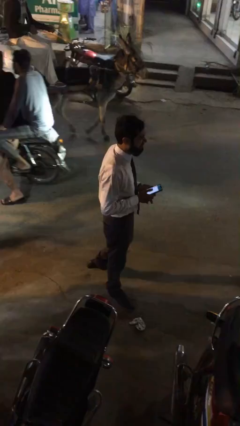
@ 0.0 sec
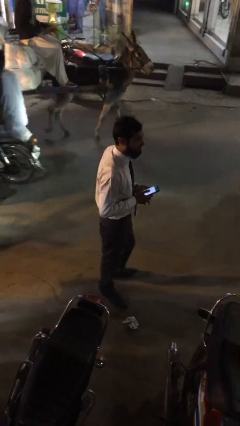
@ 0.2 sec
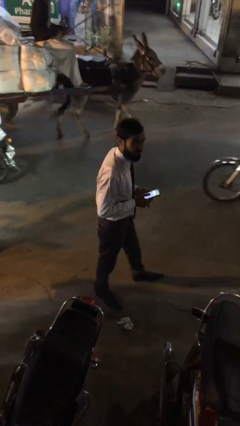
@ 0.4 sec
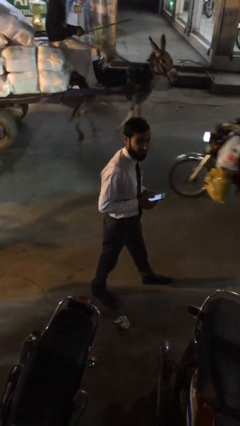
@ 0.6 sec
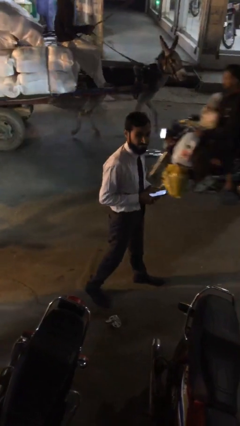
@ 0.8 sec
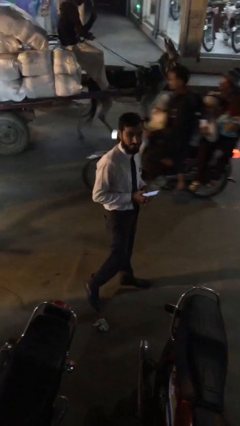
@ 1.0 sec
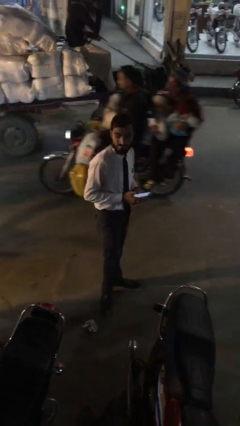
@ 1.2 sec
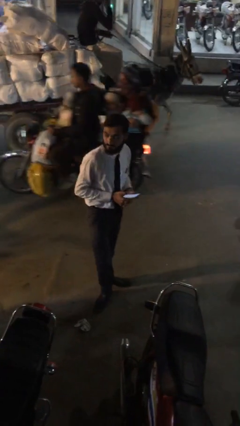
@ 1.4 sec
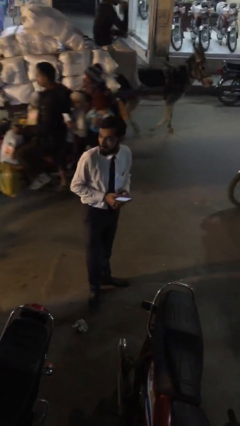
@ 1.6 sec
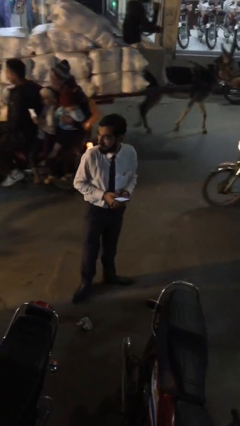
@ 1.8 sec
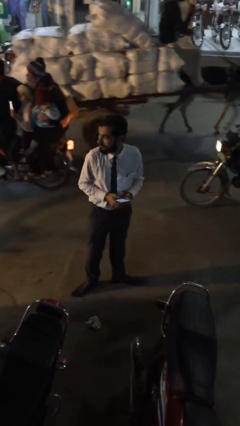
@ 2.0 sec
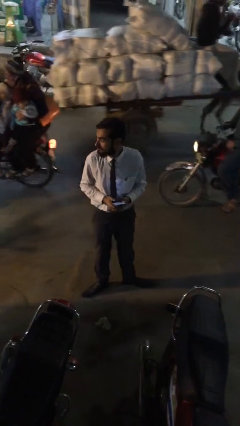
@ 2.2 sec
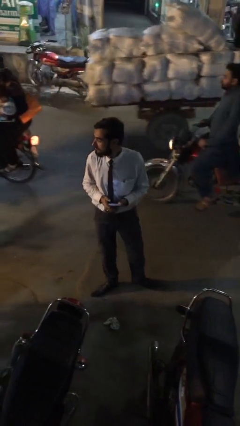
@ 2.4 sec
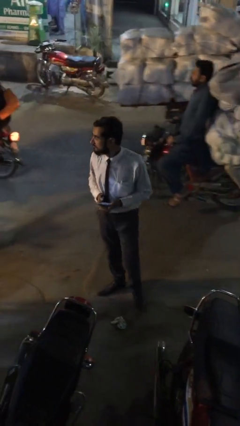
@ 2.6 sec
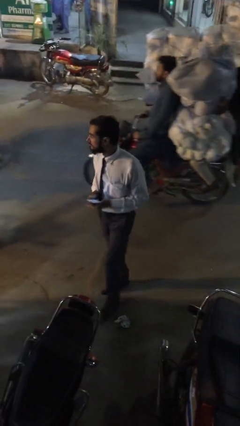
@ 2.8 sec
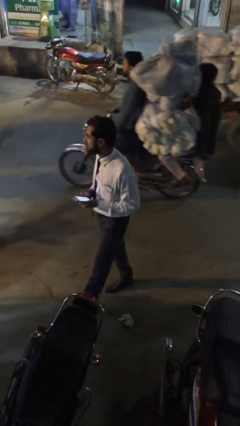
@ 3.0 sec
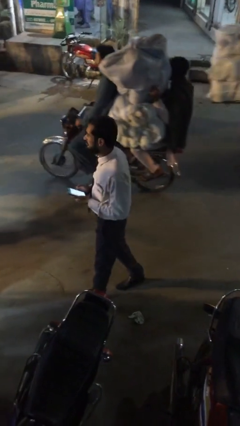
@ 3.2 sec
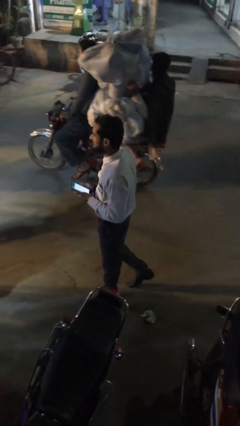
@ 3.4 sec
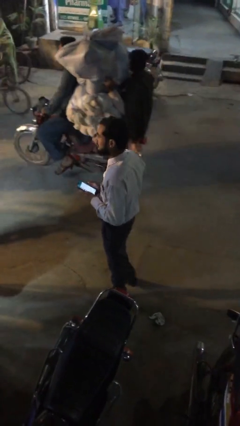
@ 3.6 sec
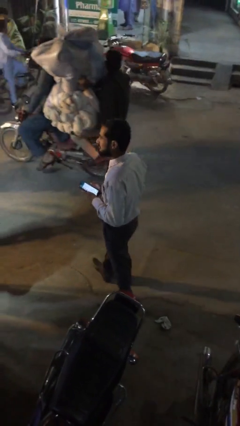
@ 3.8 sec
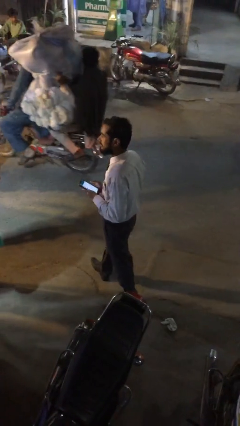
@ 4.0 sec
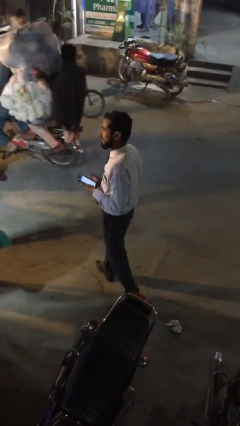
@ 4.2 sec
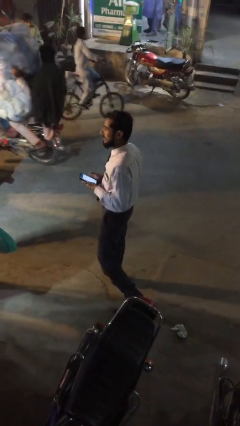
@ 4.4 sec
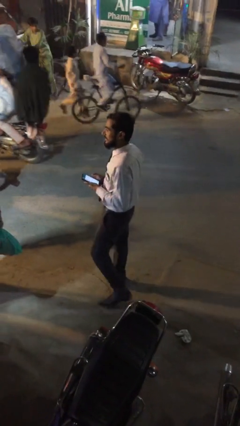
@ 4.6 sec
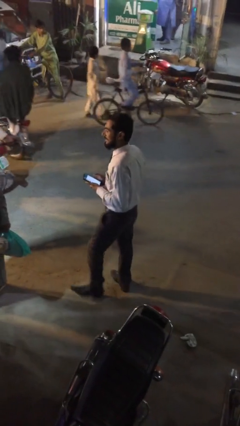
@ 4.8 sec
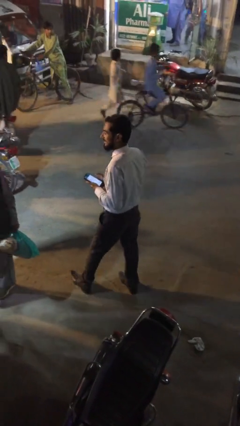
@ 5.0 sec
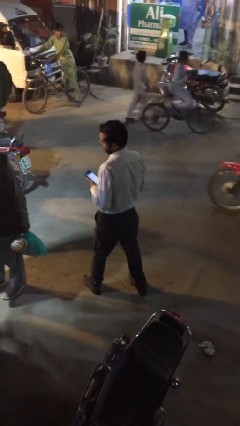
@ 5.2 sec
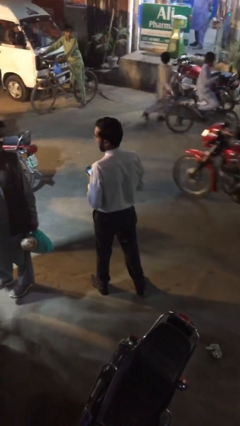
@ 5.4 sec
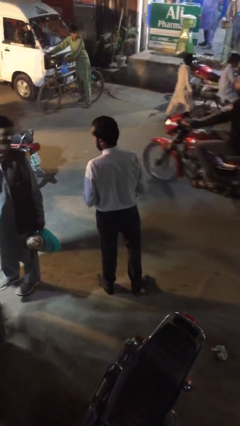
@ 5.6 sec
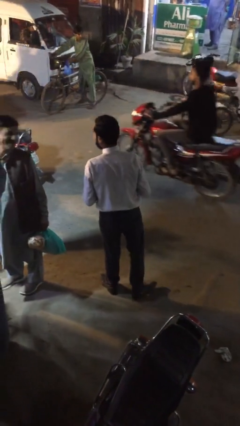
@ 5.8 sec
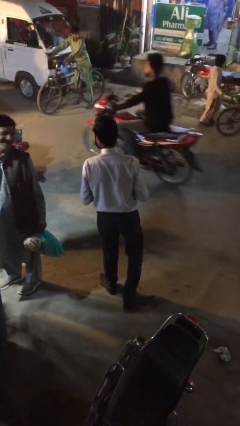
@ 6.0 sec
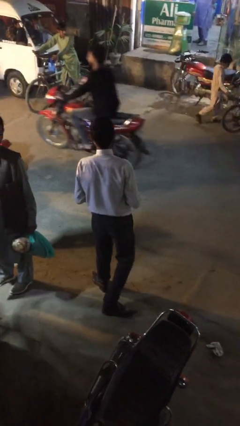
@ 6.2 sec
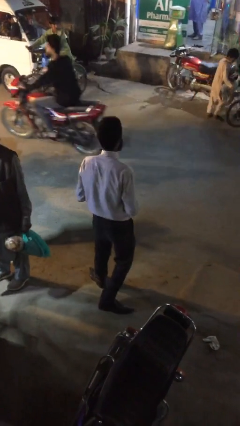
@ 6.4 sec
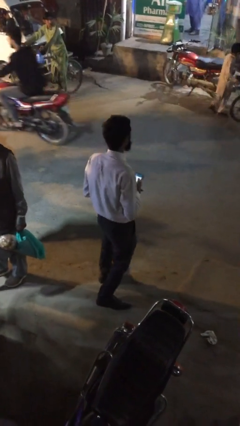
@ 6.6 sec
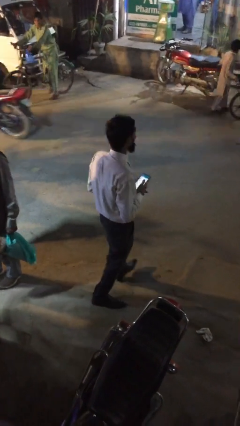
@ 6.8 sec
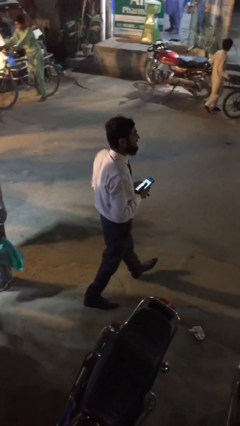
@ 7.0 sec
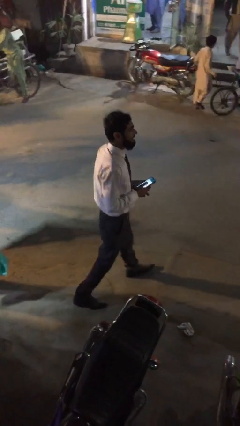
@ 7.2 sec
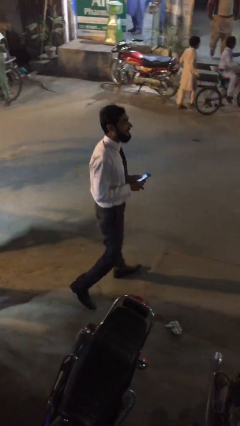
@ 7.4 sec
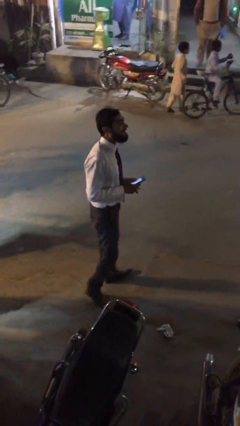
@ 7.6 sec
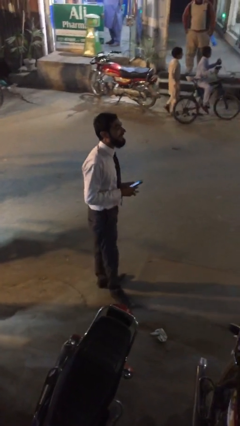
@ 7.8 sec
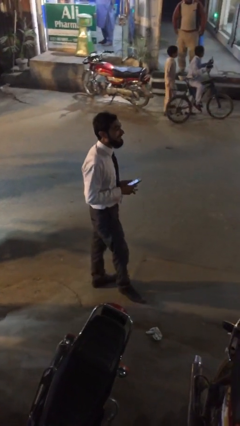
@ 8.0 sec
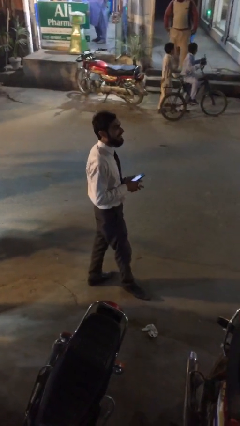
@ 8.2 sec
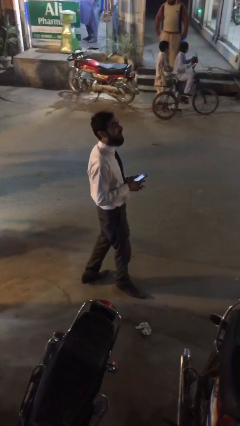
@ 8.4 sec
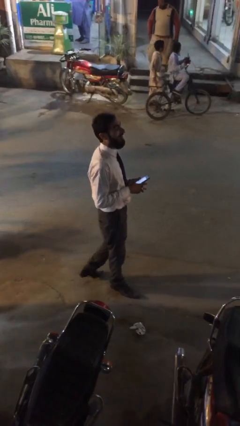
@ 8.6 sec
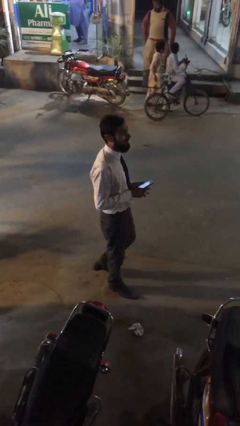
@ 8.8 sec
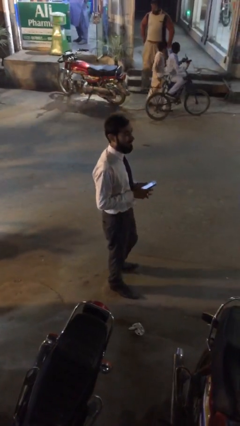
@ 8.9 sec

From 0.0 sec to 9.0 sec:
person walks

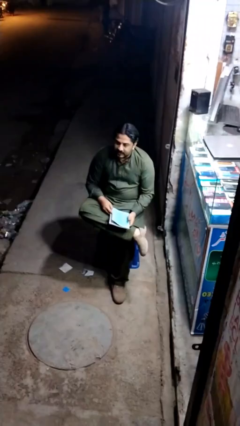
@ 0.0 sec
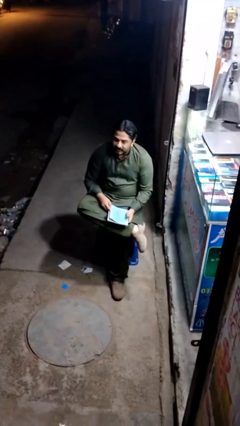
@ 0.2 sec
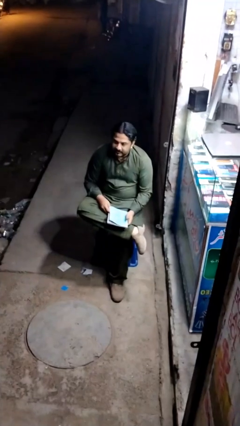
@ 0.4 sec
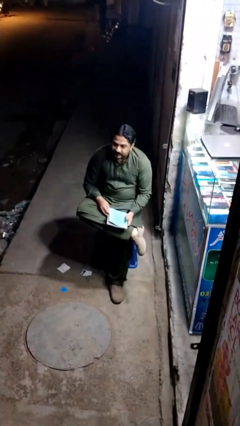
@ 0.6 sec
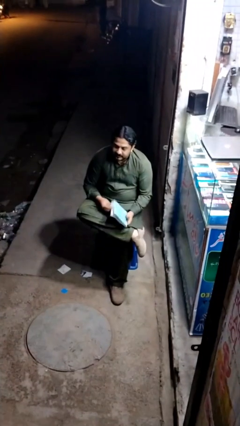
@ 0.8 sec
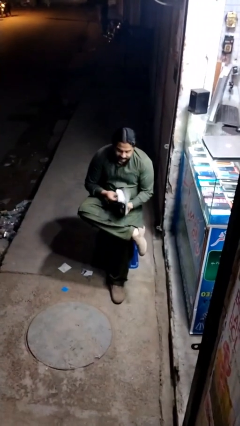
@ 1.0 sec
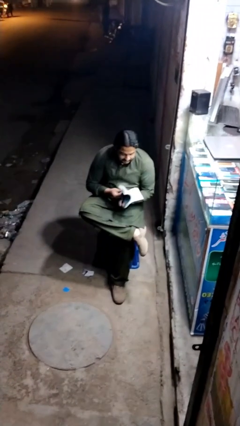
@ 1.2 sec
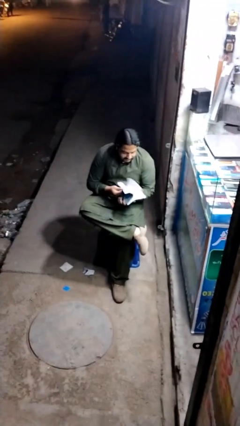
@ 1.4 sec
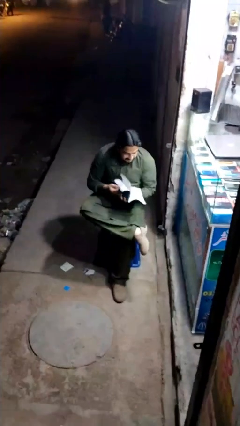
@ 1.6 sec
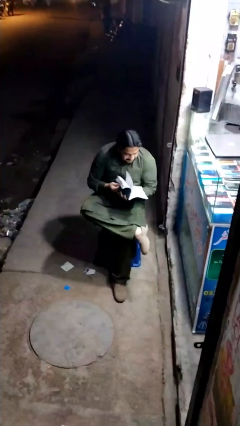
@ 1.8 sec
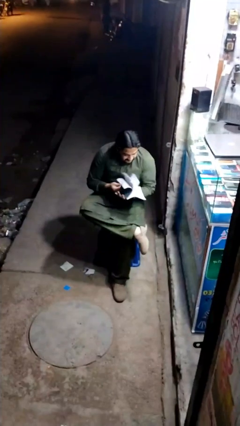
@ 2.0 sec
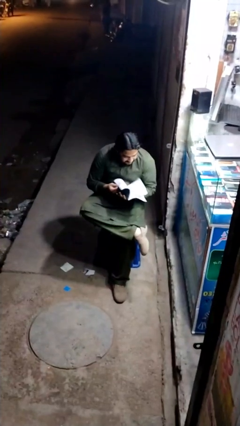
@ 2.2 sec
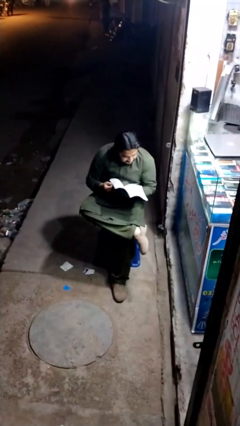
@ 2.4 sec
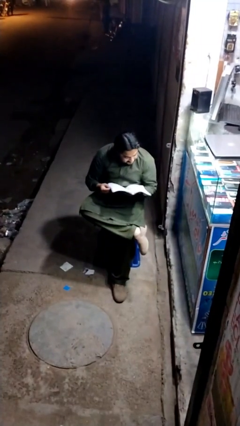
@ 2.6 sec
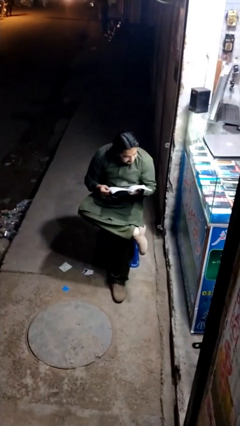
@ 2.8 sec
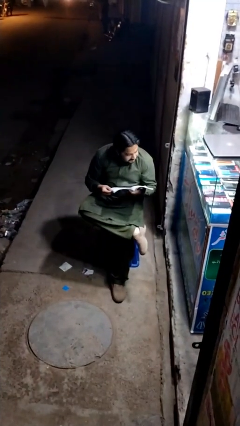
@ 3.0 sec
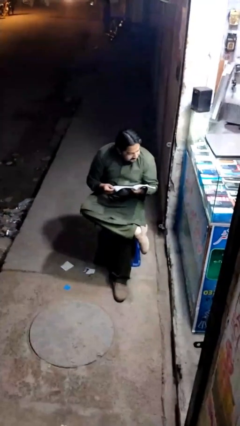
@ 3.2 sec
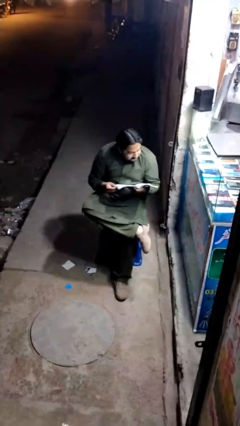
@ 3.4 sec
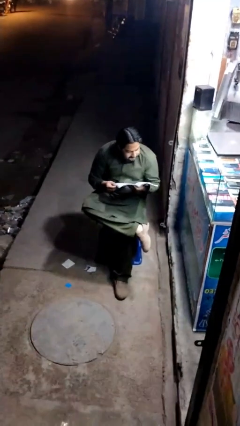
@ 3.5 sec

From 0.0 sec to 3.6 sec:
person reads document

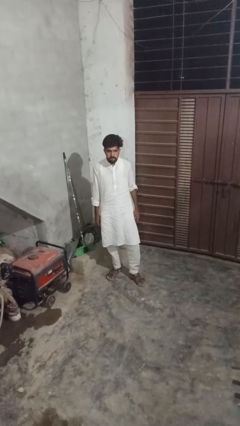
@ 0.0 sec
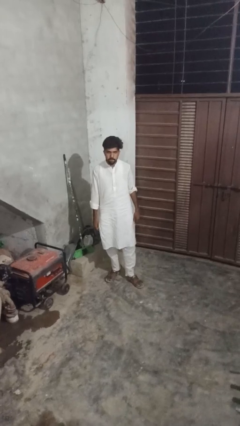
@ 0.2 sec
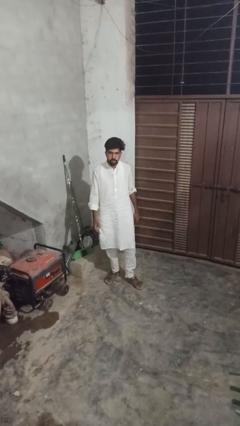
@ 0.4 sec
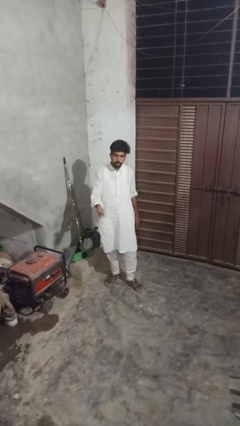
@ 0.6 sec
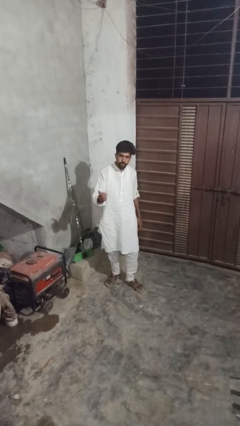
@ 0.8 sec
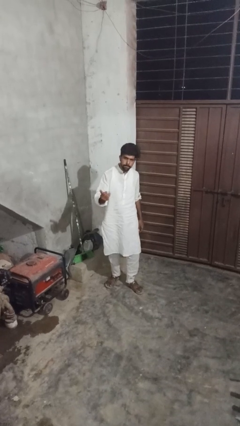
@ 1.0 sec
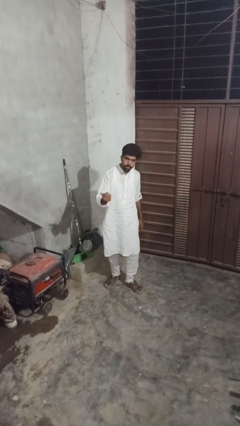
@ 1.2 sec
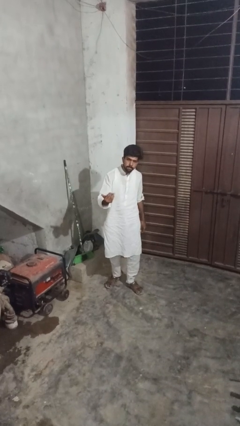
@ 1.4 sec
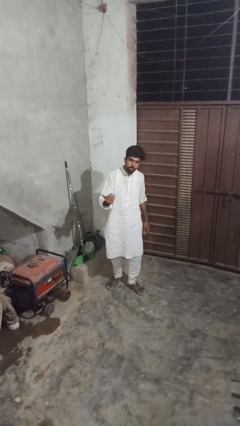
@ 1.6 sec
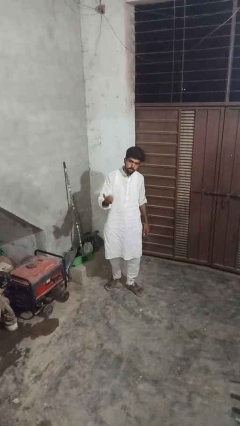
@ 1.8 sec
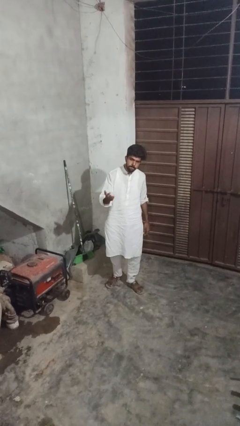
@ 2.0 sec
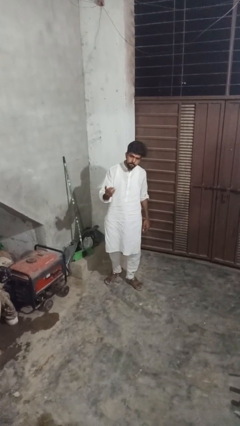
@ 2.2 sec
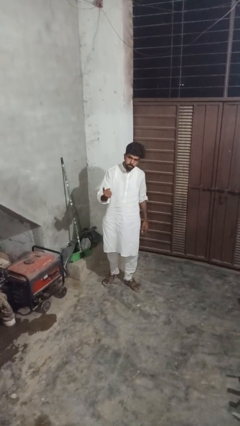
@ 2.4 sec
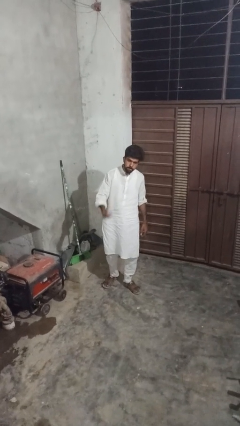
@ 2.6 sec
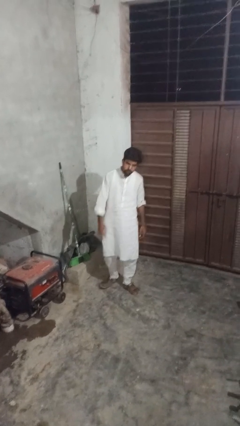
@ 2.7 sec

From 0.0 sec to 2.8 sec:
person gestures come here

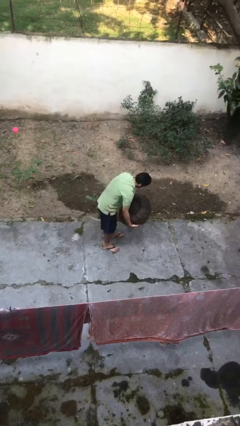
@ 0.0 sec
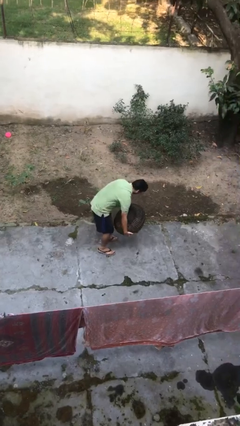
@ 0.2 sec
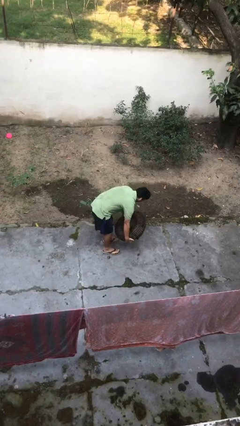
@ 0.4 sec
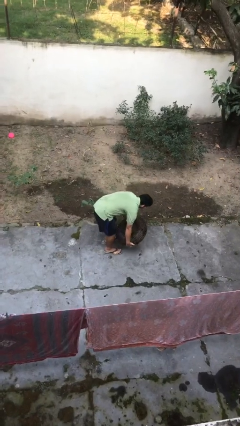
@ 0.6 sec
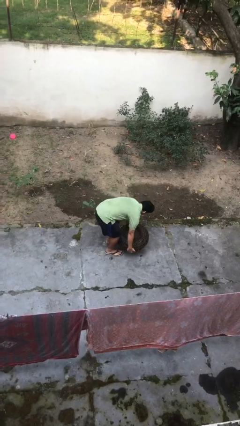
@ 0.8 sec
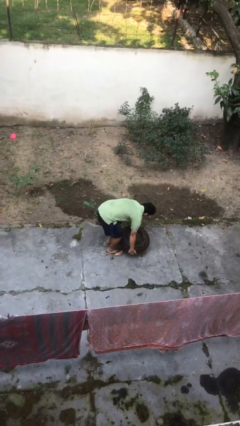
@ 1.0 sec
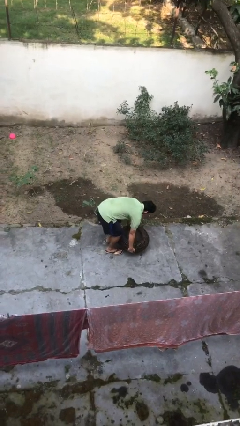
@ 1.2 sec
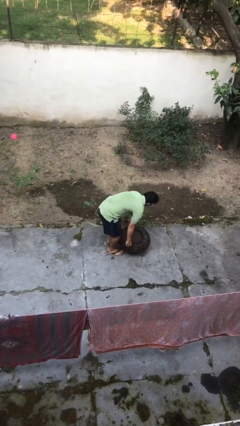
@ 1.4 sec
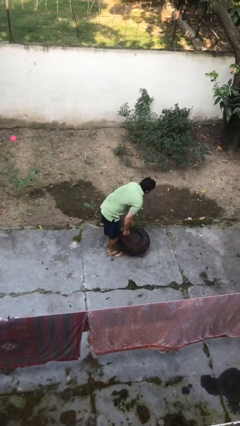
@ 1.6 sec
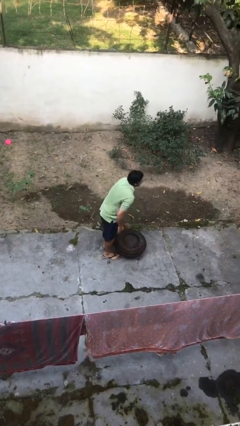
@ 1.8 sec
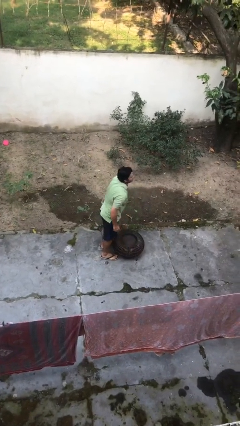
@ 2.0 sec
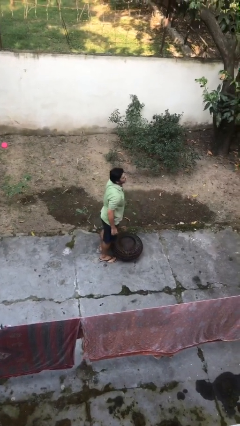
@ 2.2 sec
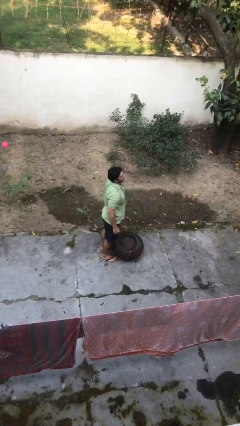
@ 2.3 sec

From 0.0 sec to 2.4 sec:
person puts down object on floor
